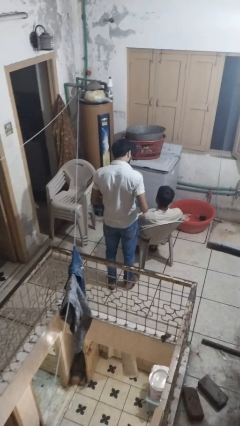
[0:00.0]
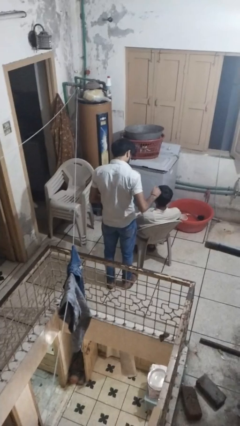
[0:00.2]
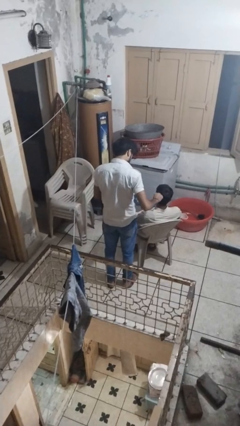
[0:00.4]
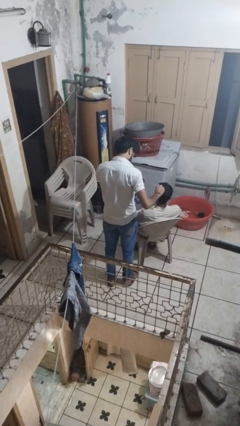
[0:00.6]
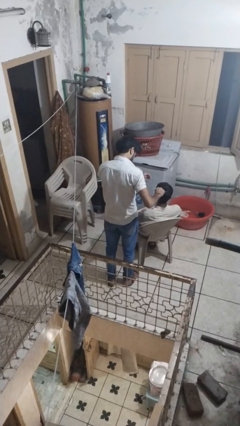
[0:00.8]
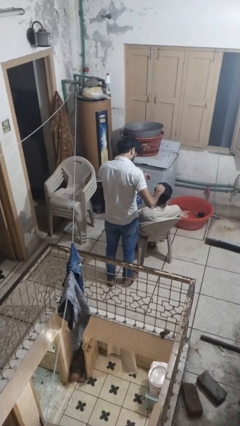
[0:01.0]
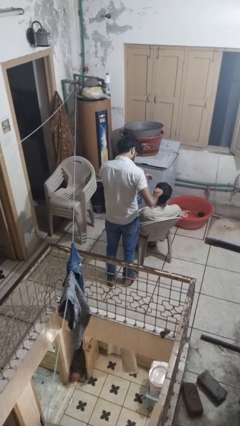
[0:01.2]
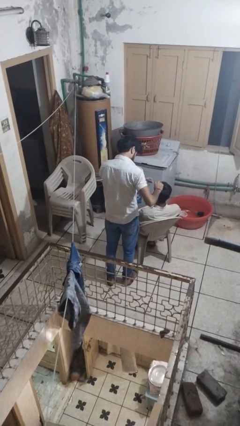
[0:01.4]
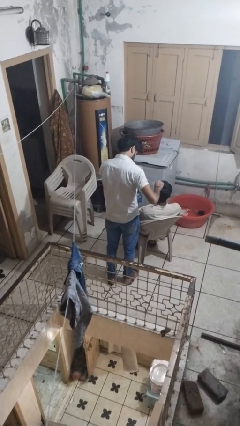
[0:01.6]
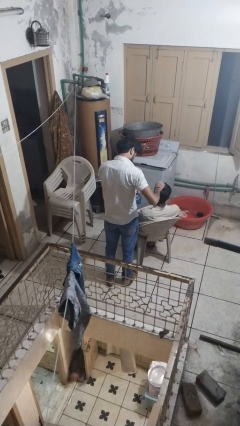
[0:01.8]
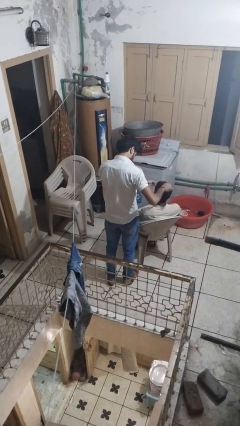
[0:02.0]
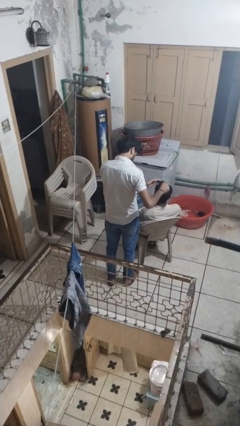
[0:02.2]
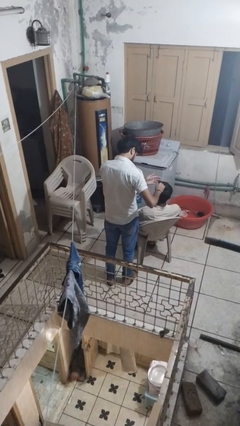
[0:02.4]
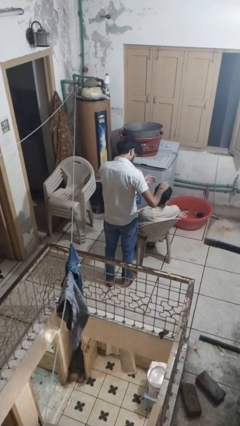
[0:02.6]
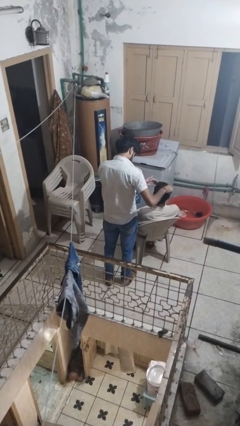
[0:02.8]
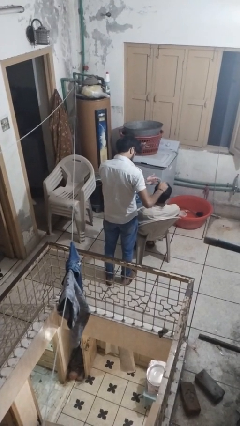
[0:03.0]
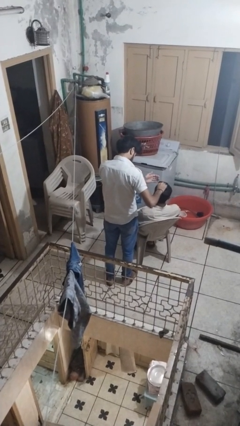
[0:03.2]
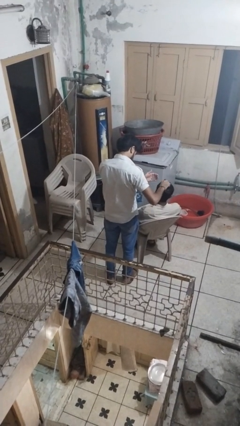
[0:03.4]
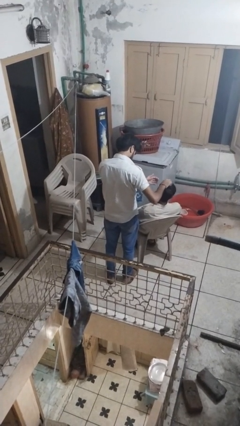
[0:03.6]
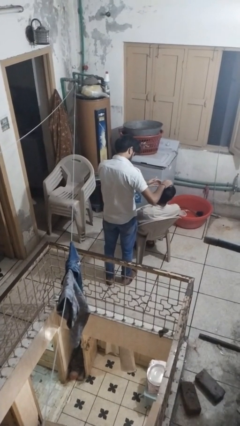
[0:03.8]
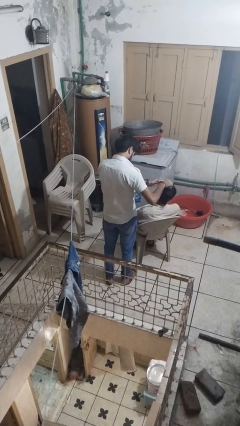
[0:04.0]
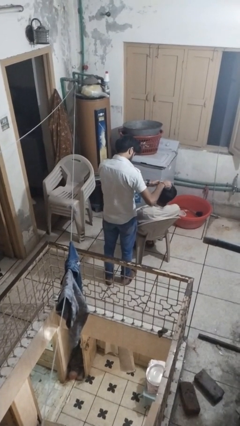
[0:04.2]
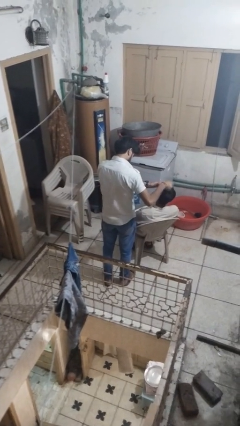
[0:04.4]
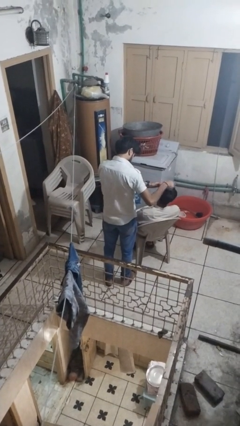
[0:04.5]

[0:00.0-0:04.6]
person brushes hair of person

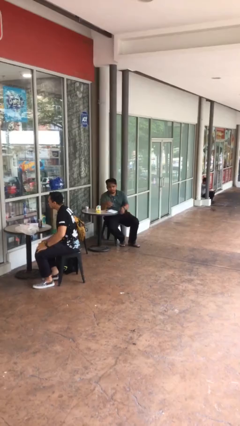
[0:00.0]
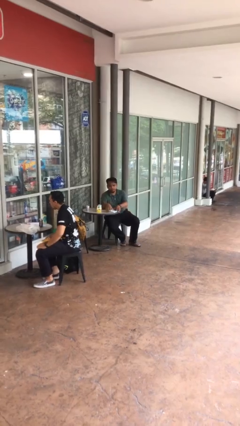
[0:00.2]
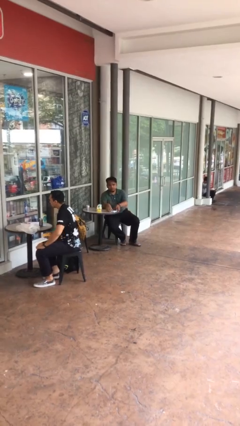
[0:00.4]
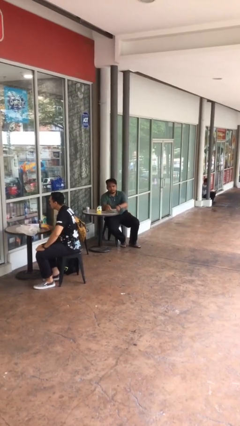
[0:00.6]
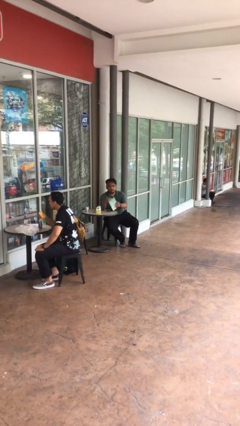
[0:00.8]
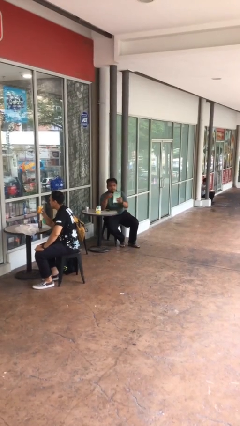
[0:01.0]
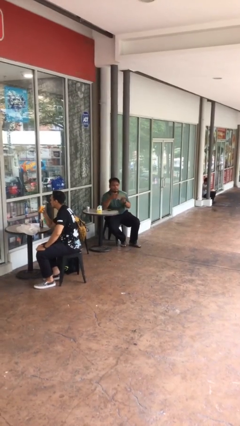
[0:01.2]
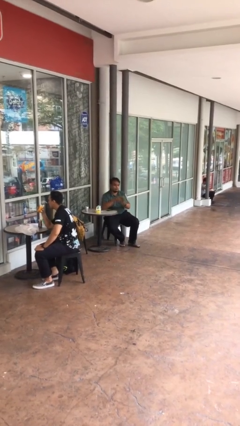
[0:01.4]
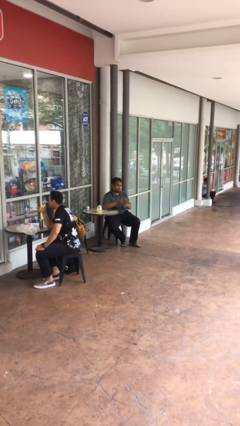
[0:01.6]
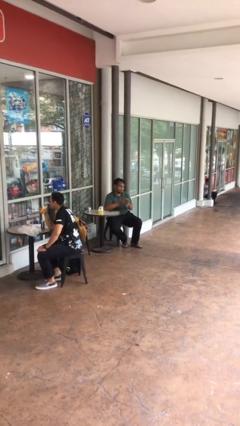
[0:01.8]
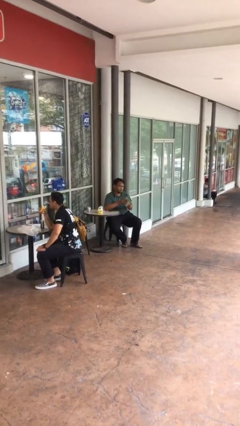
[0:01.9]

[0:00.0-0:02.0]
person picks up object from table

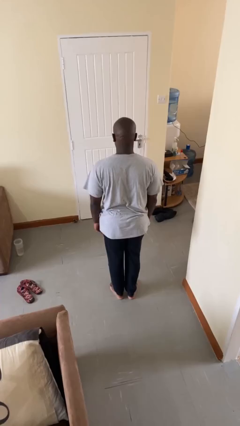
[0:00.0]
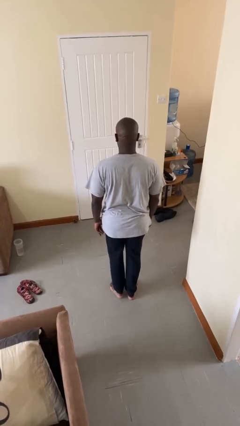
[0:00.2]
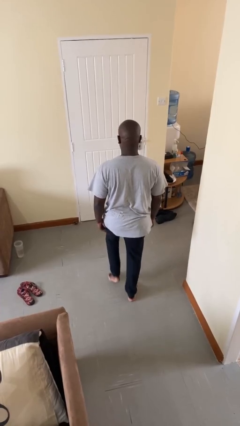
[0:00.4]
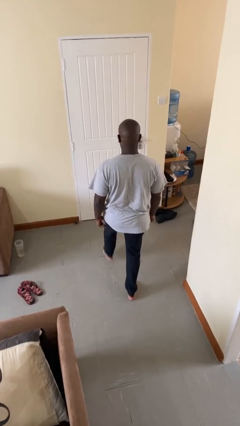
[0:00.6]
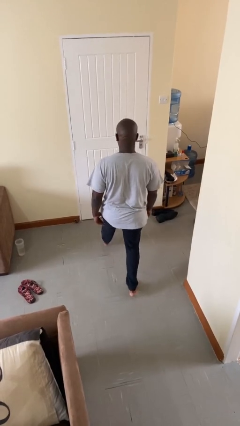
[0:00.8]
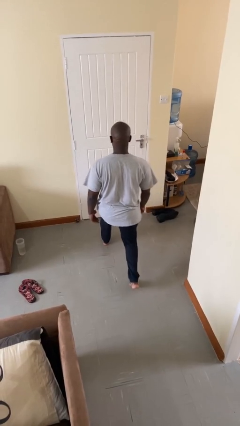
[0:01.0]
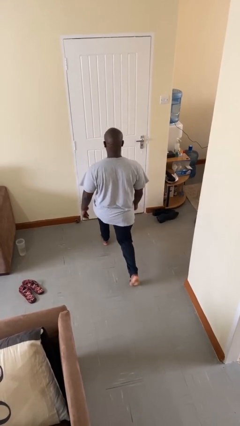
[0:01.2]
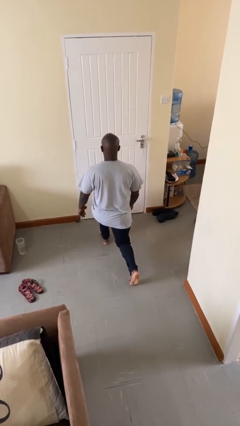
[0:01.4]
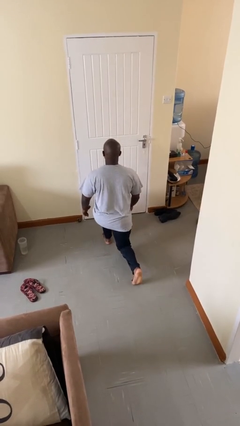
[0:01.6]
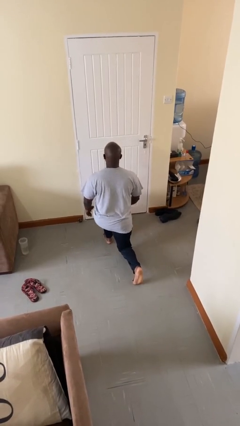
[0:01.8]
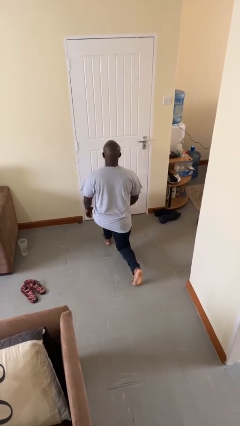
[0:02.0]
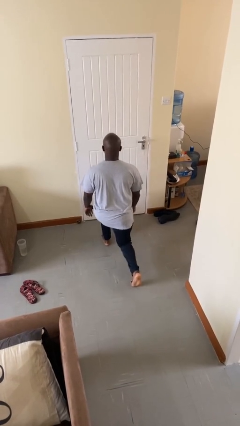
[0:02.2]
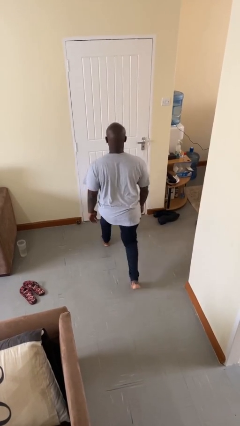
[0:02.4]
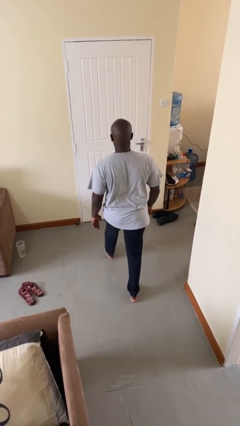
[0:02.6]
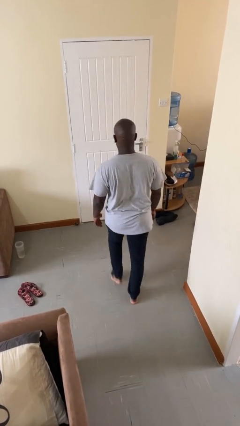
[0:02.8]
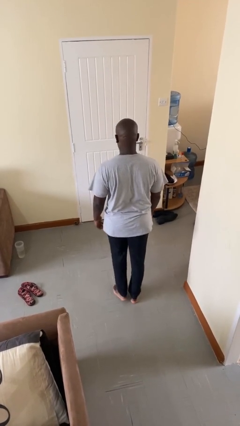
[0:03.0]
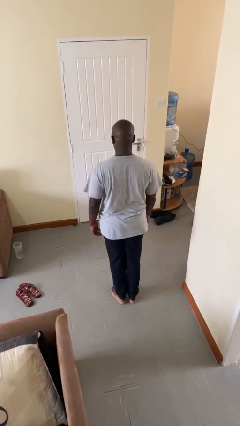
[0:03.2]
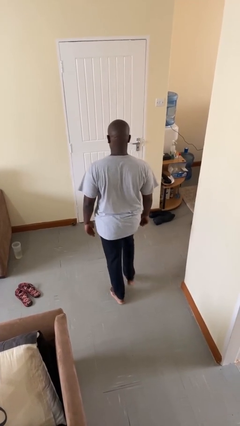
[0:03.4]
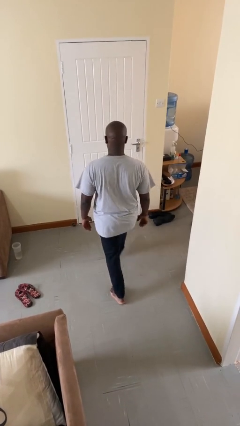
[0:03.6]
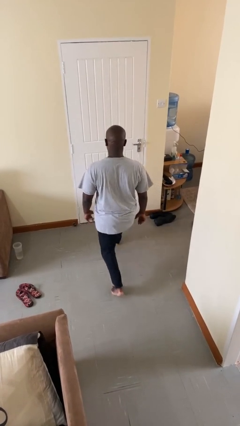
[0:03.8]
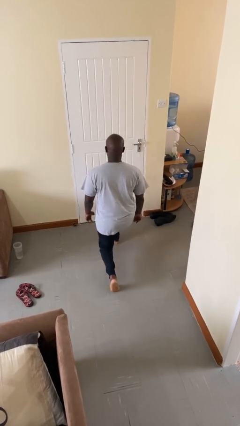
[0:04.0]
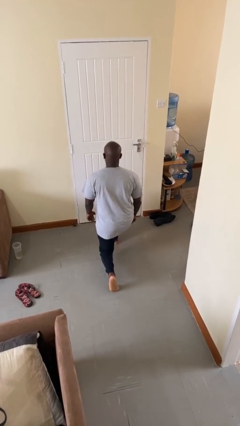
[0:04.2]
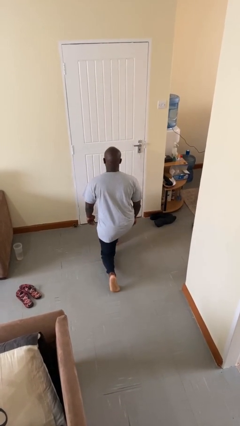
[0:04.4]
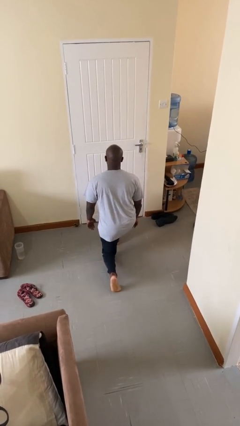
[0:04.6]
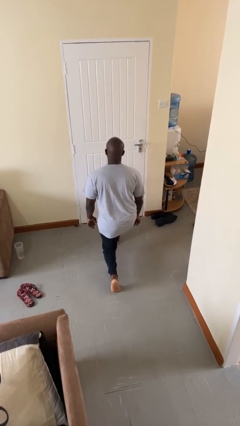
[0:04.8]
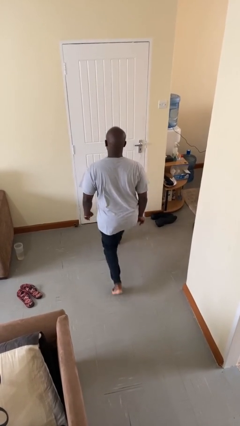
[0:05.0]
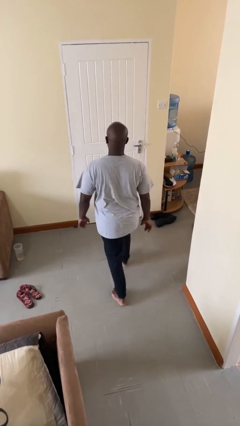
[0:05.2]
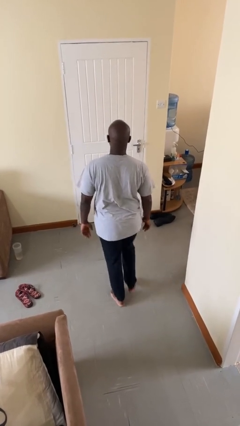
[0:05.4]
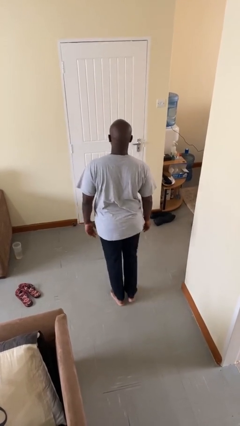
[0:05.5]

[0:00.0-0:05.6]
person exercises with lunges

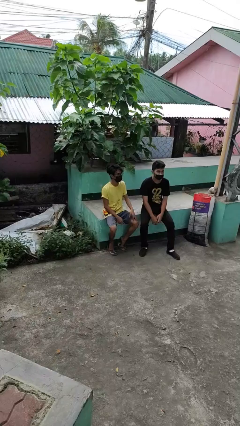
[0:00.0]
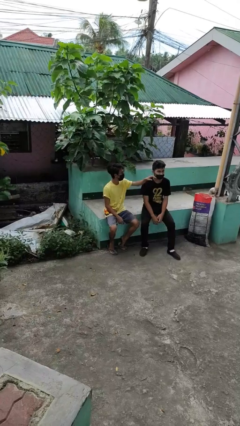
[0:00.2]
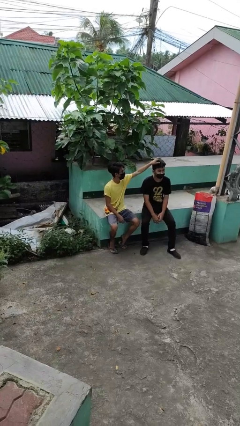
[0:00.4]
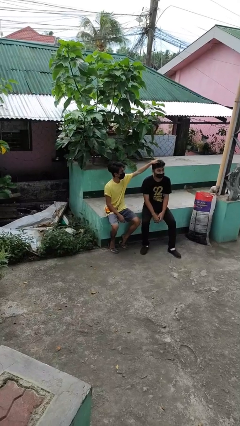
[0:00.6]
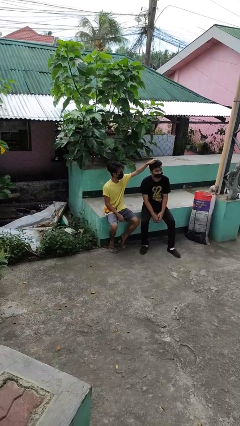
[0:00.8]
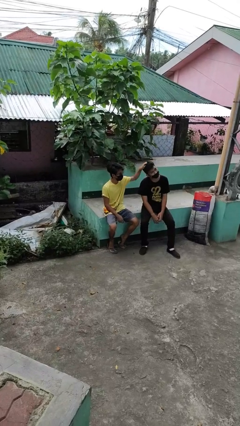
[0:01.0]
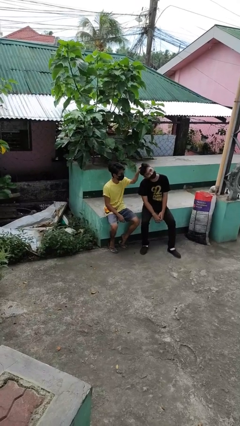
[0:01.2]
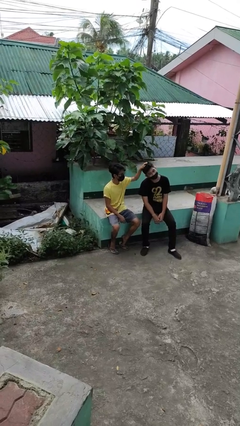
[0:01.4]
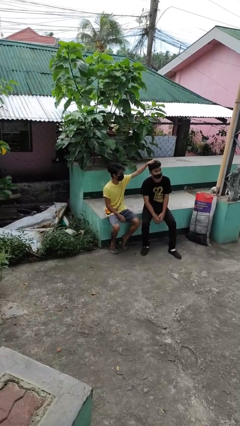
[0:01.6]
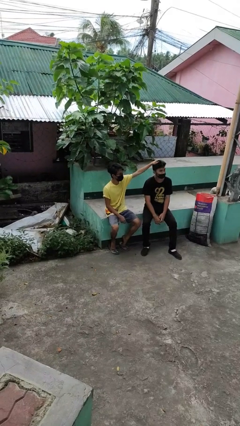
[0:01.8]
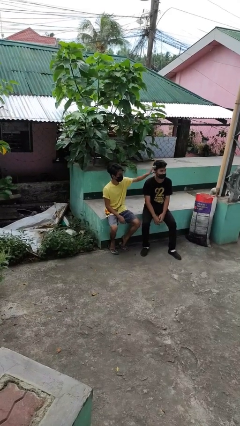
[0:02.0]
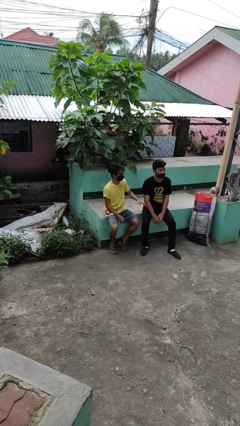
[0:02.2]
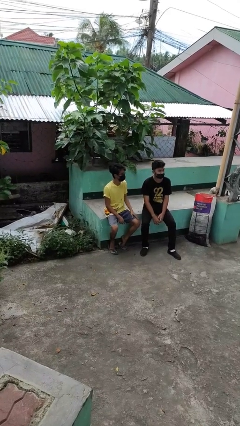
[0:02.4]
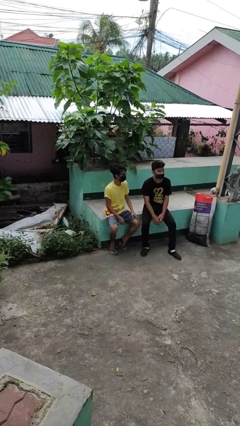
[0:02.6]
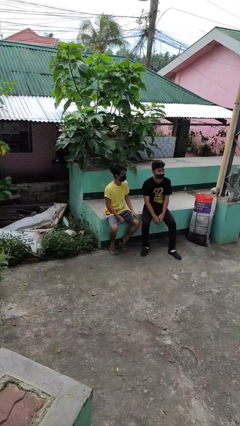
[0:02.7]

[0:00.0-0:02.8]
person grabs person by hair

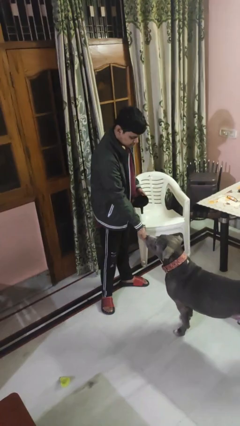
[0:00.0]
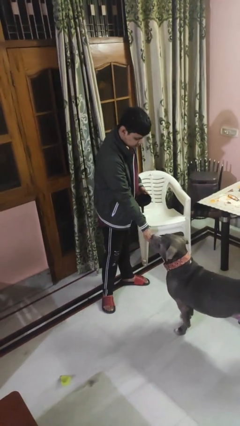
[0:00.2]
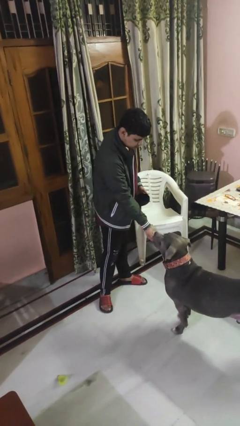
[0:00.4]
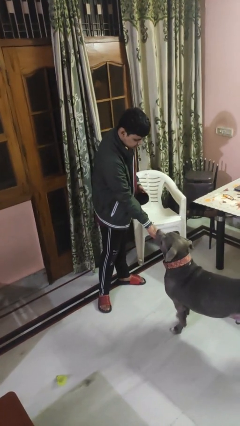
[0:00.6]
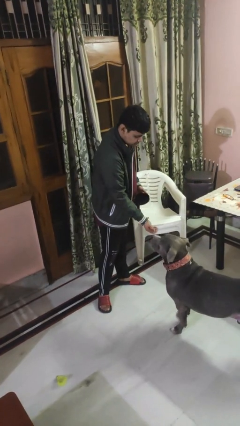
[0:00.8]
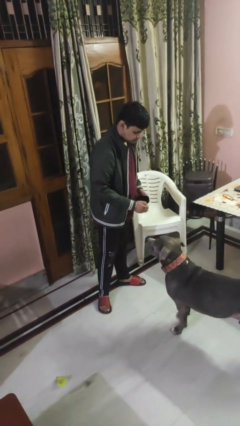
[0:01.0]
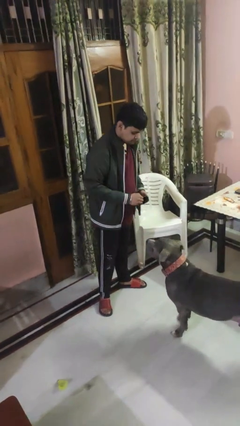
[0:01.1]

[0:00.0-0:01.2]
person feeds dog

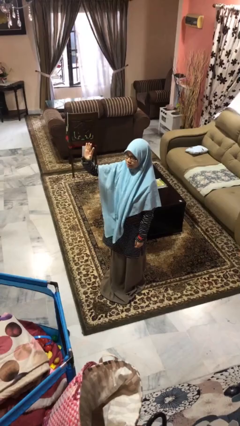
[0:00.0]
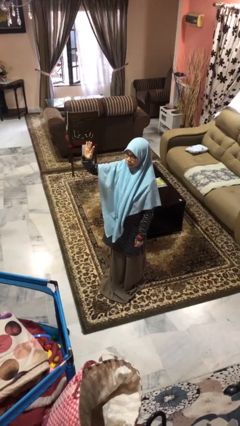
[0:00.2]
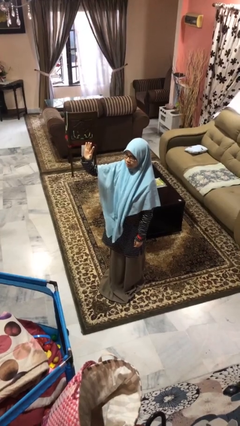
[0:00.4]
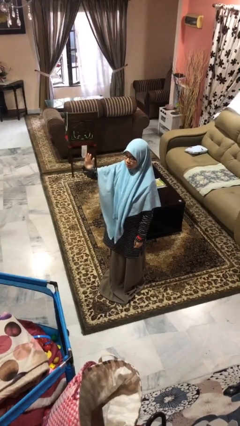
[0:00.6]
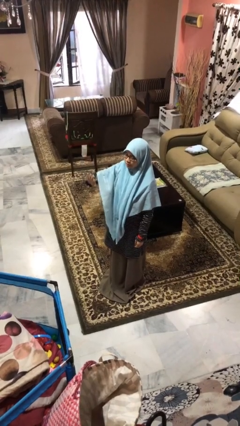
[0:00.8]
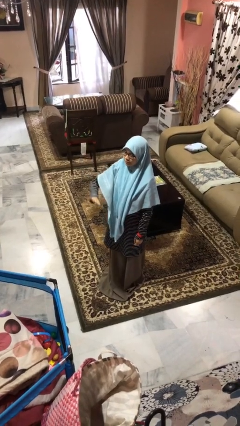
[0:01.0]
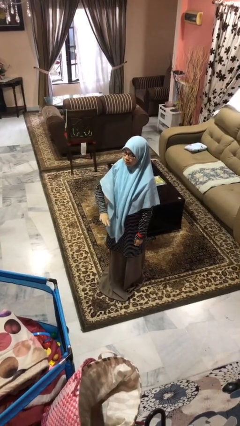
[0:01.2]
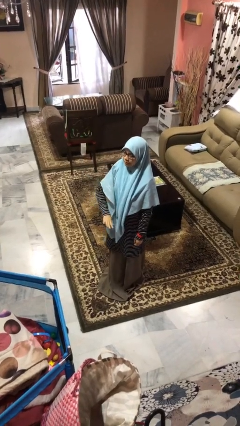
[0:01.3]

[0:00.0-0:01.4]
person gestures swipe down
